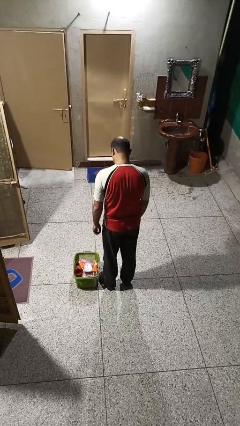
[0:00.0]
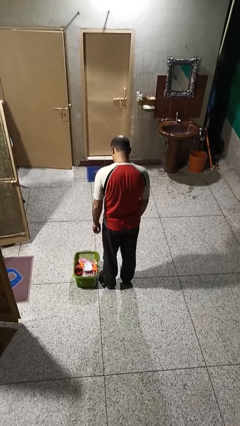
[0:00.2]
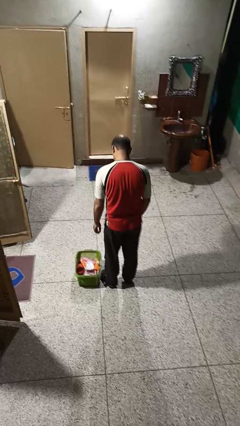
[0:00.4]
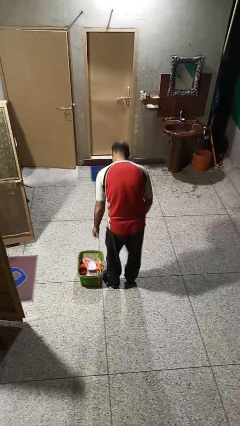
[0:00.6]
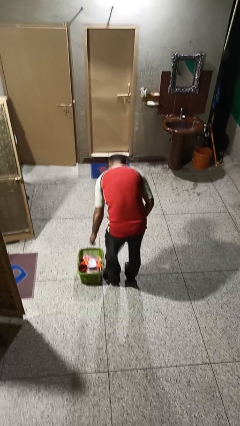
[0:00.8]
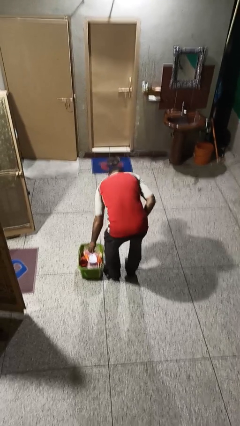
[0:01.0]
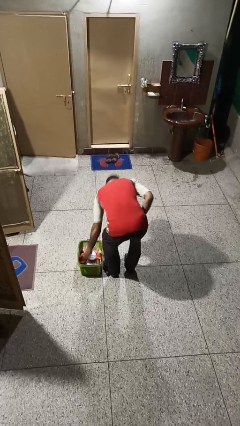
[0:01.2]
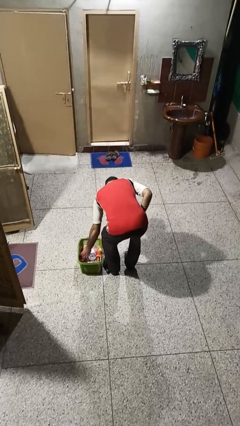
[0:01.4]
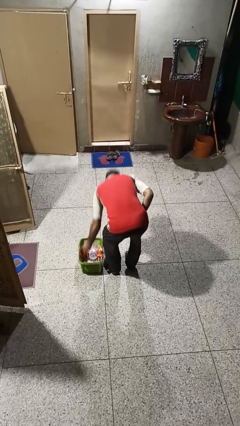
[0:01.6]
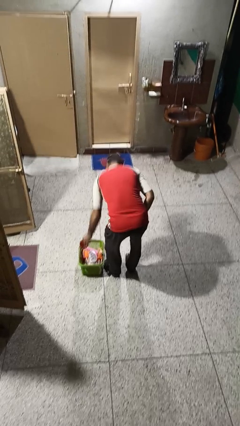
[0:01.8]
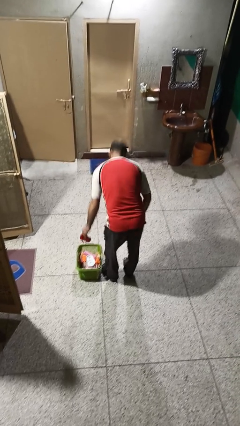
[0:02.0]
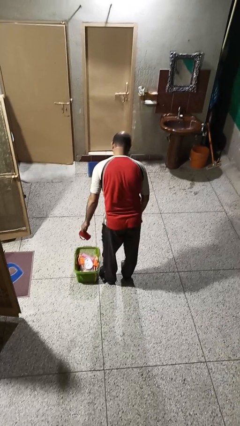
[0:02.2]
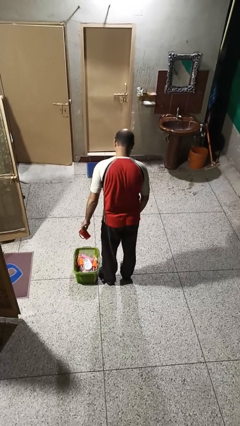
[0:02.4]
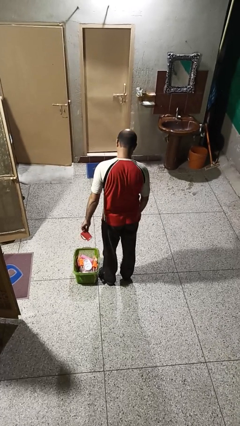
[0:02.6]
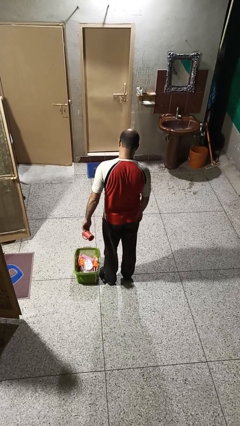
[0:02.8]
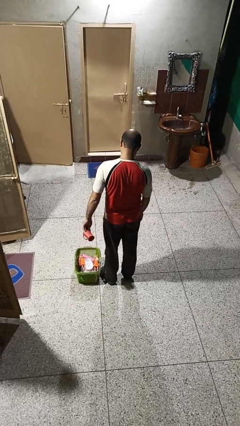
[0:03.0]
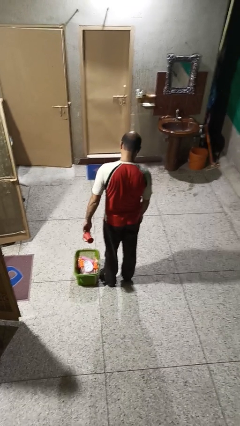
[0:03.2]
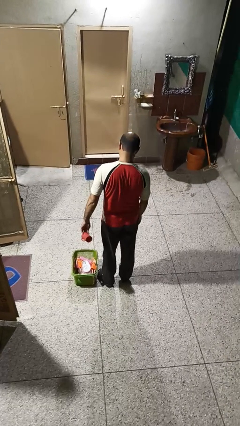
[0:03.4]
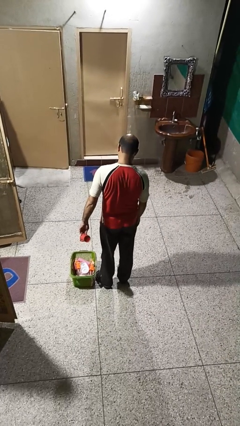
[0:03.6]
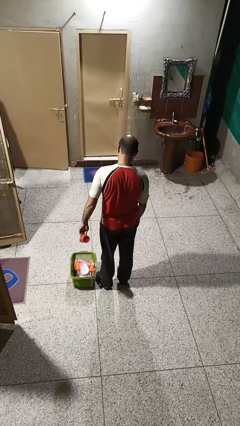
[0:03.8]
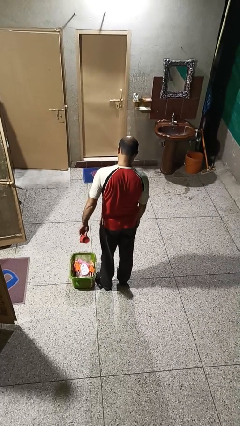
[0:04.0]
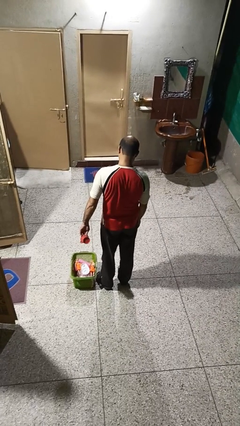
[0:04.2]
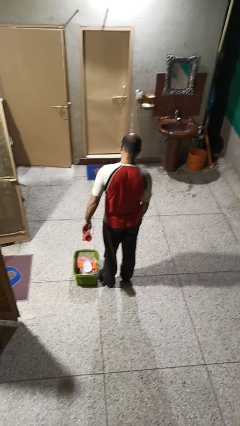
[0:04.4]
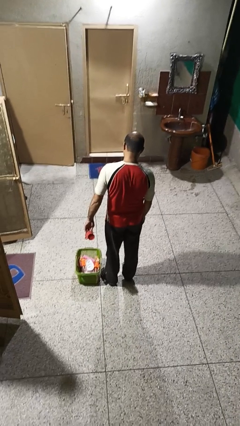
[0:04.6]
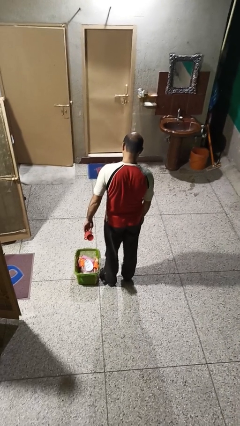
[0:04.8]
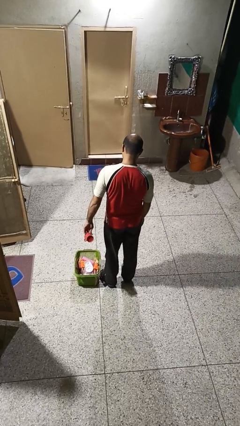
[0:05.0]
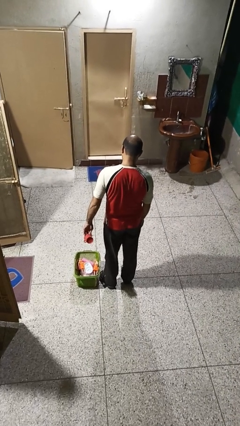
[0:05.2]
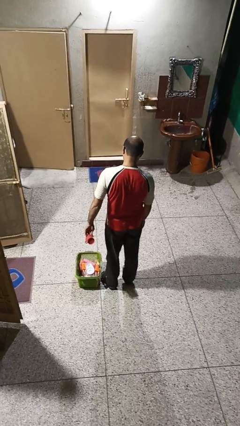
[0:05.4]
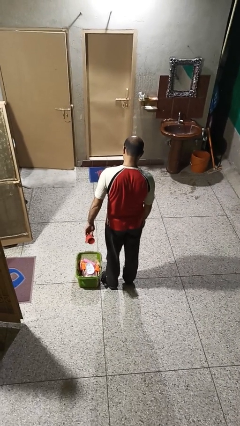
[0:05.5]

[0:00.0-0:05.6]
person takes object from basket

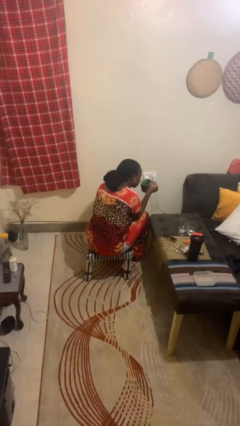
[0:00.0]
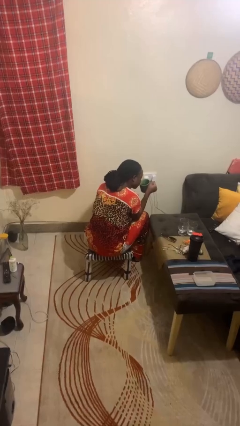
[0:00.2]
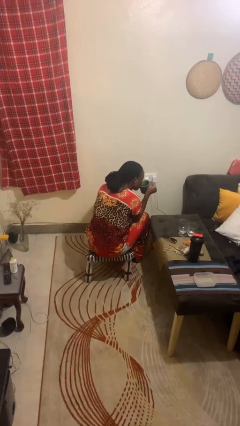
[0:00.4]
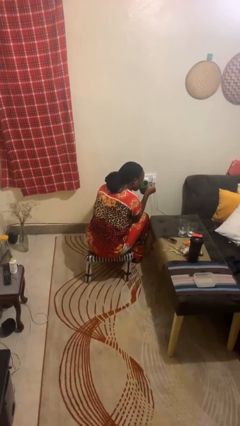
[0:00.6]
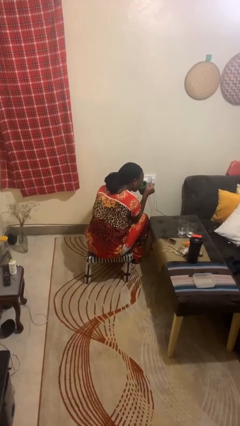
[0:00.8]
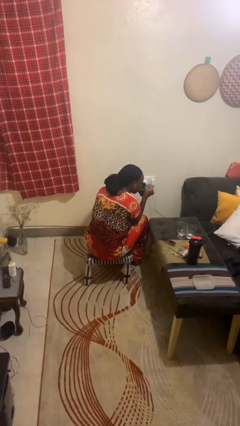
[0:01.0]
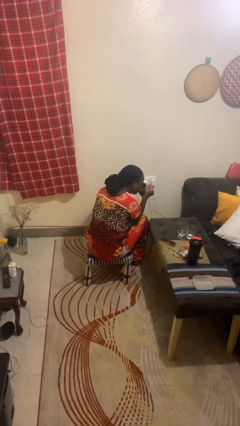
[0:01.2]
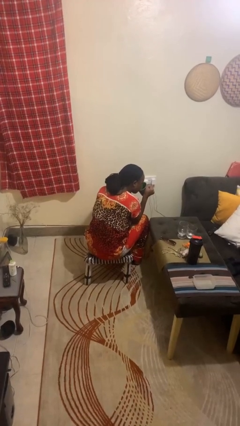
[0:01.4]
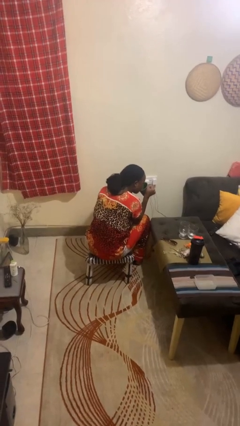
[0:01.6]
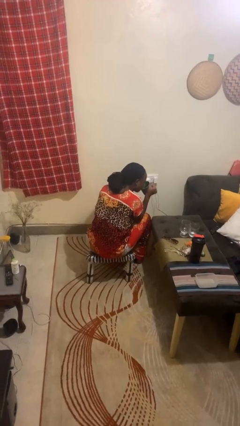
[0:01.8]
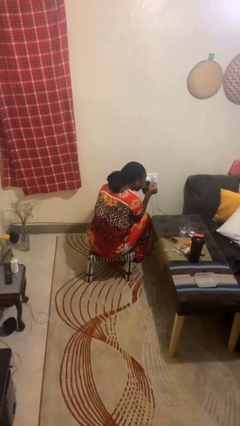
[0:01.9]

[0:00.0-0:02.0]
person drinks from mug

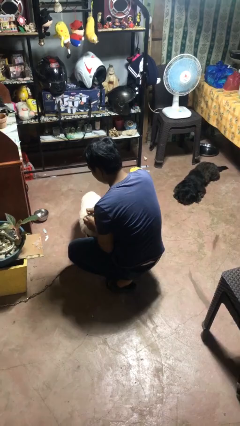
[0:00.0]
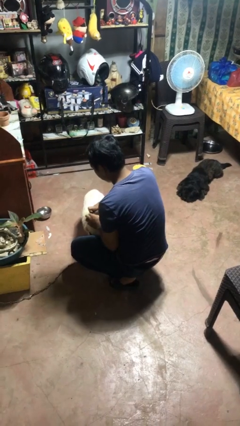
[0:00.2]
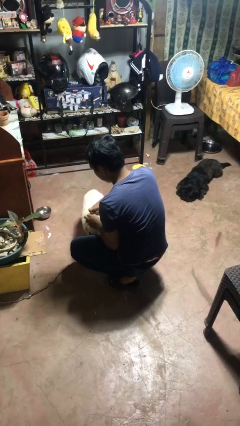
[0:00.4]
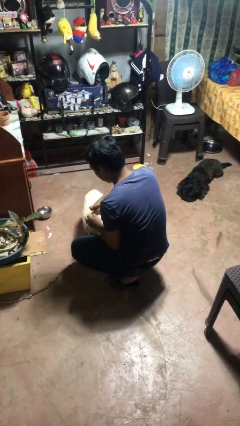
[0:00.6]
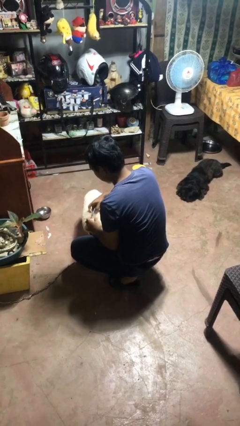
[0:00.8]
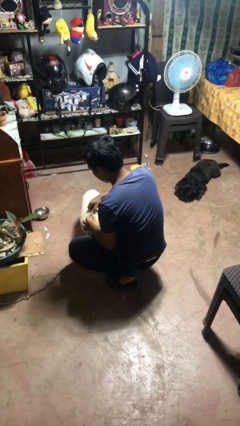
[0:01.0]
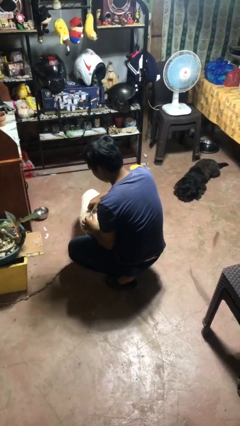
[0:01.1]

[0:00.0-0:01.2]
person attaches leash to dog

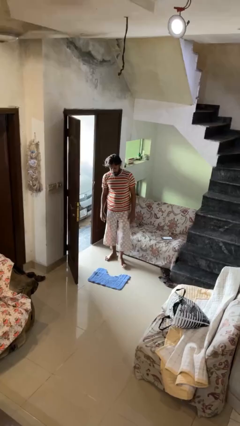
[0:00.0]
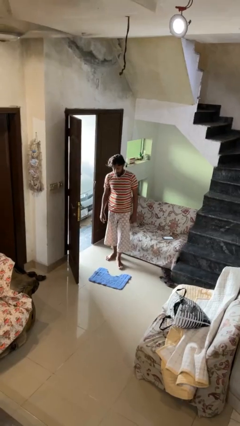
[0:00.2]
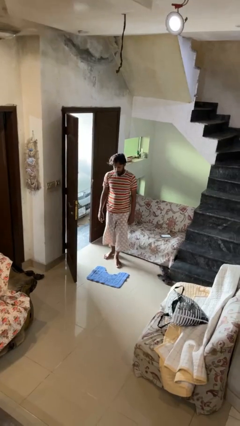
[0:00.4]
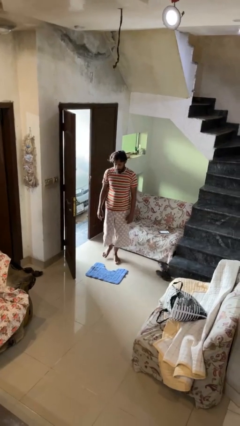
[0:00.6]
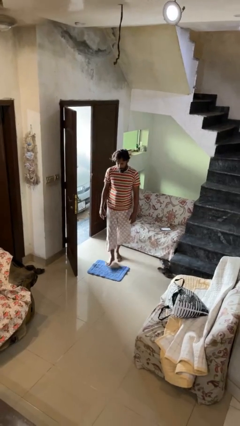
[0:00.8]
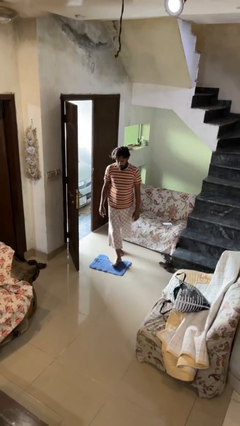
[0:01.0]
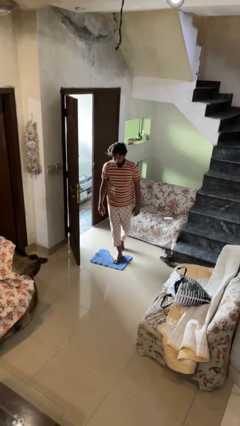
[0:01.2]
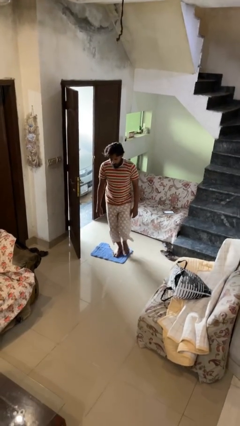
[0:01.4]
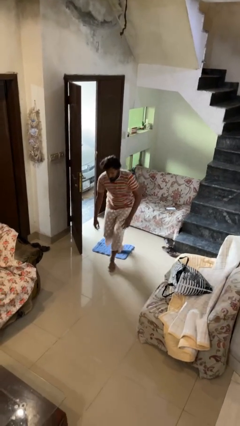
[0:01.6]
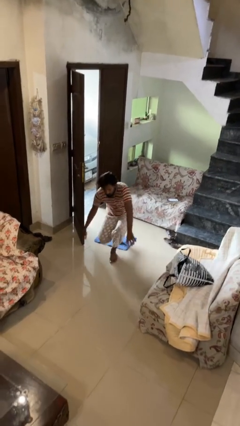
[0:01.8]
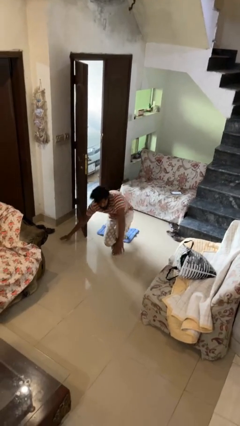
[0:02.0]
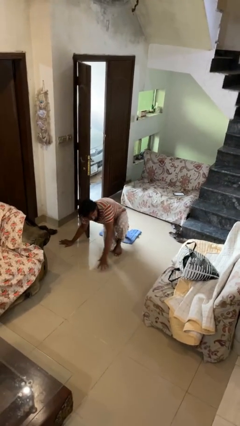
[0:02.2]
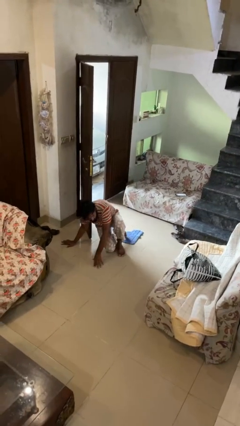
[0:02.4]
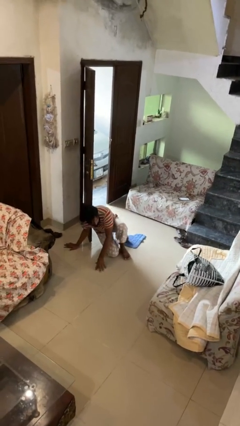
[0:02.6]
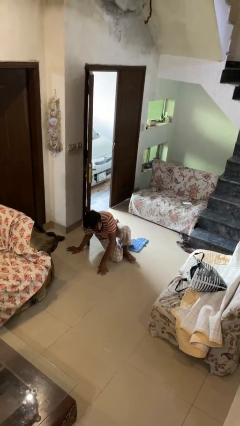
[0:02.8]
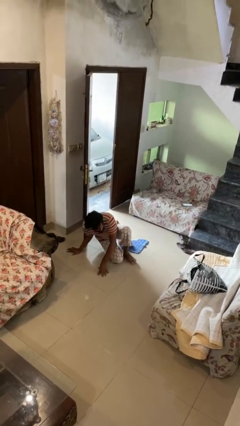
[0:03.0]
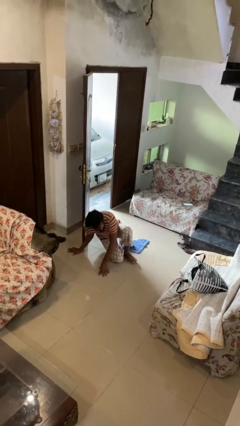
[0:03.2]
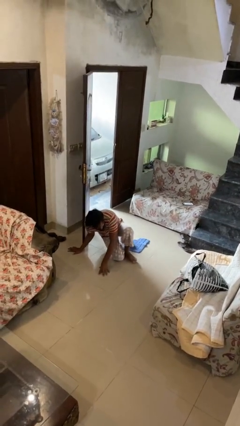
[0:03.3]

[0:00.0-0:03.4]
person trips on object on floor

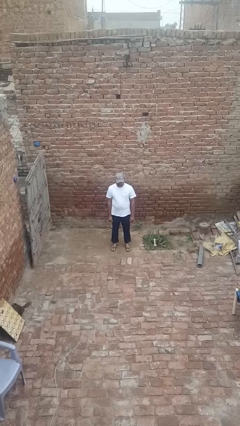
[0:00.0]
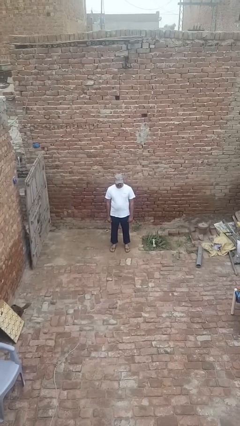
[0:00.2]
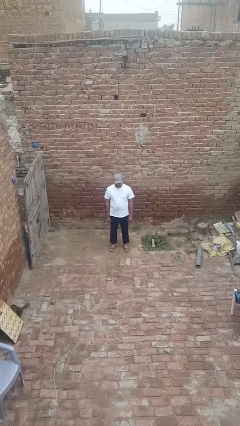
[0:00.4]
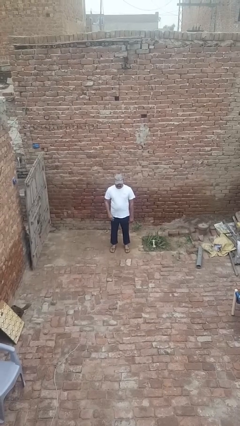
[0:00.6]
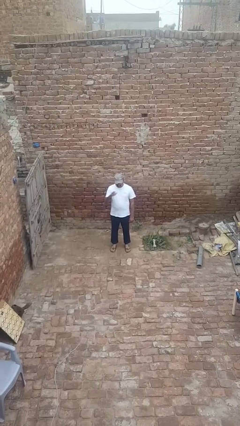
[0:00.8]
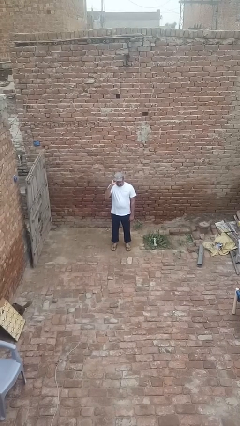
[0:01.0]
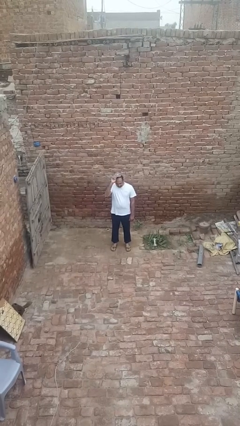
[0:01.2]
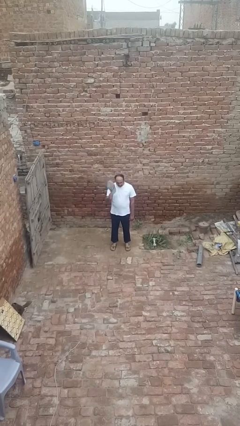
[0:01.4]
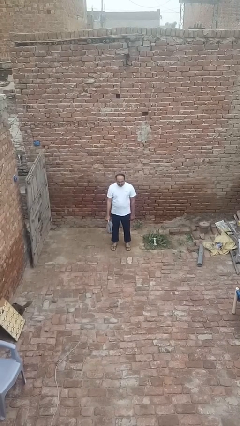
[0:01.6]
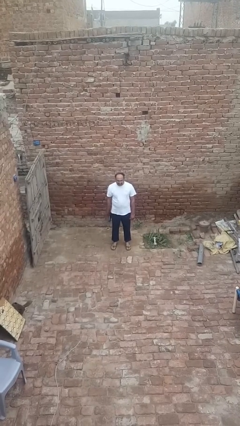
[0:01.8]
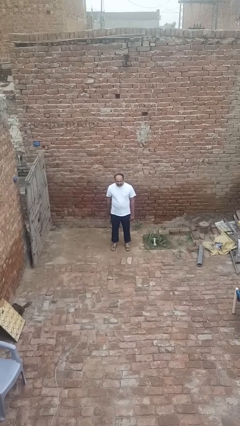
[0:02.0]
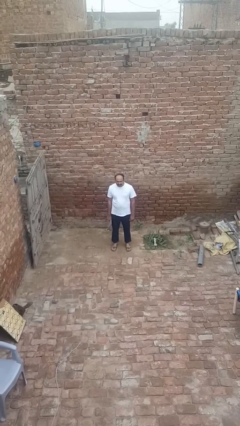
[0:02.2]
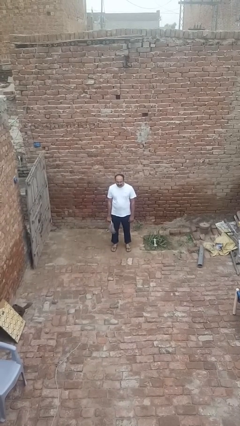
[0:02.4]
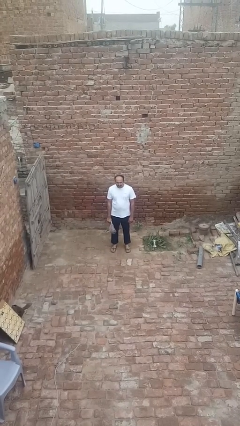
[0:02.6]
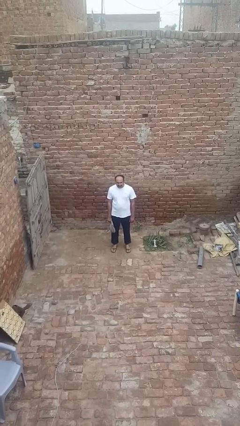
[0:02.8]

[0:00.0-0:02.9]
person takes off hat

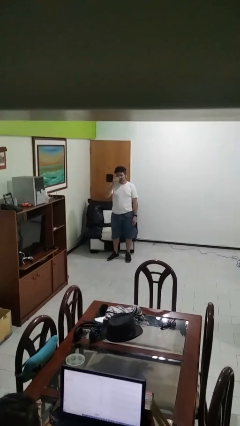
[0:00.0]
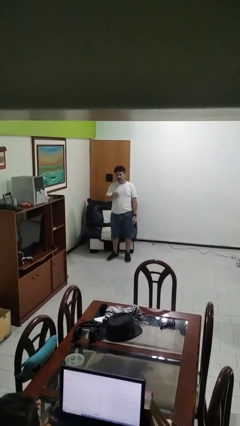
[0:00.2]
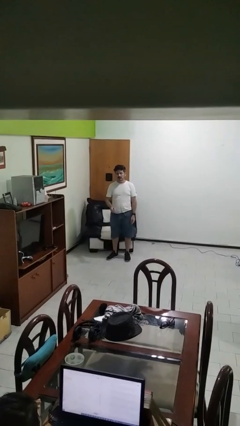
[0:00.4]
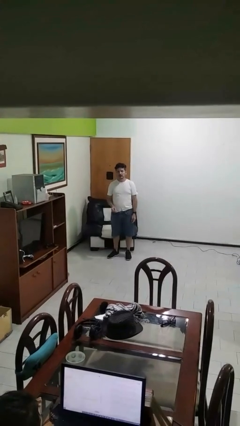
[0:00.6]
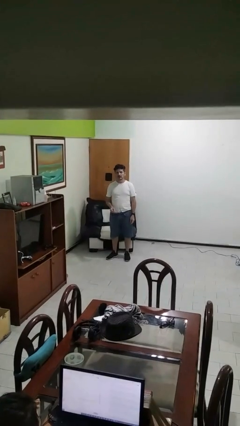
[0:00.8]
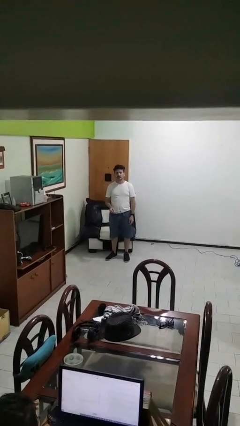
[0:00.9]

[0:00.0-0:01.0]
person takes off glasses

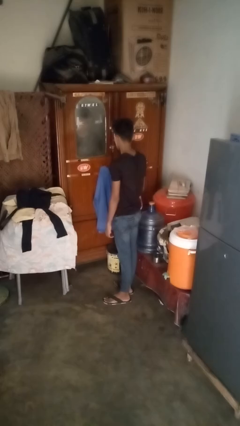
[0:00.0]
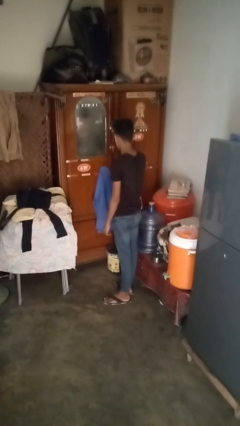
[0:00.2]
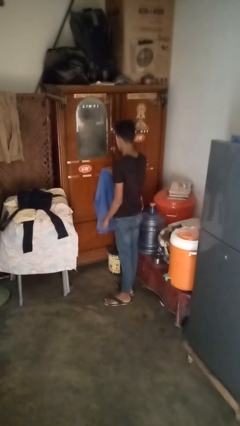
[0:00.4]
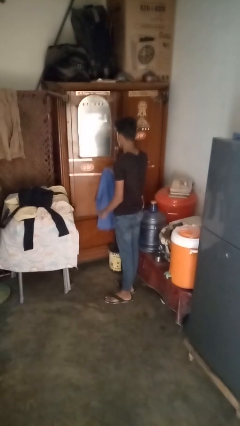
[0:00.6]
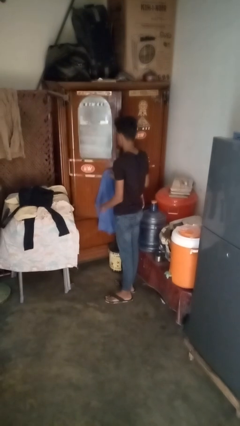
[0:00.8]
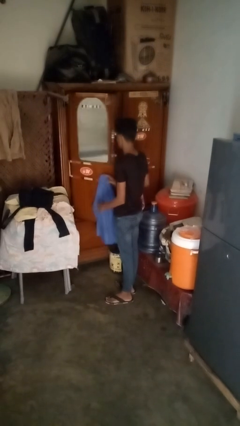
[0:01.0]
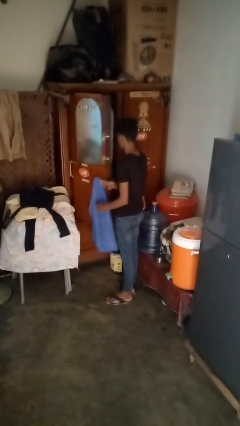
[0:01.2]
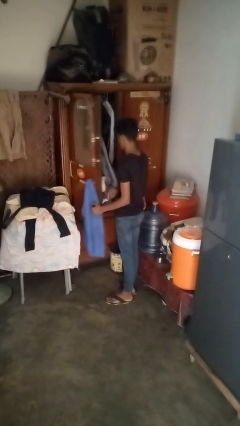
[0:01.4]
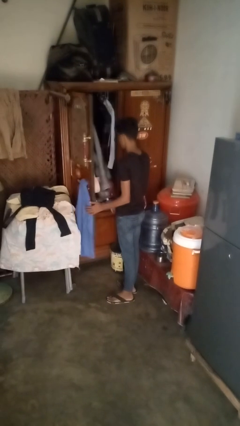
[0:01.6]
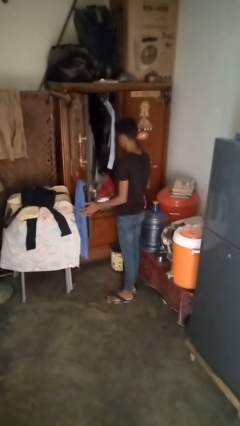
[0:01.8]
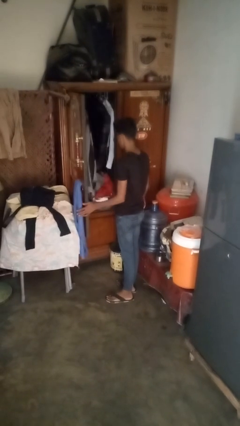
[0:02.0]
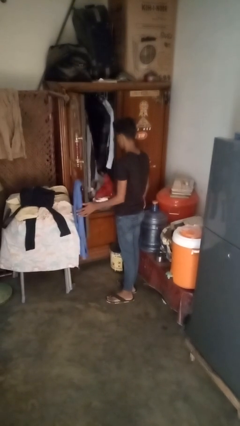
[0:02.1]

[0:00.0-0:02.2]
person opens dresser drawer
